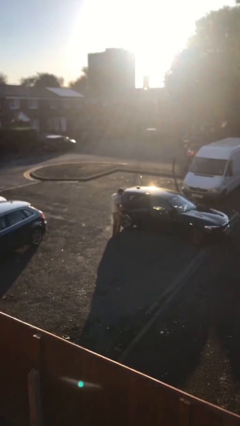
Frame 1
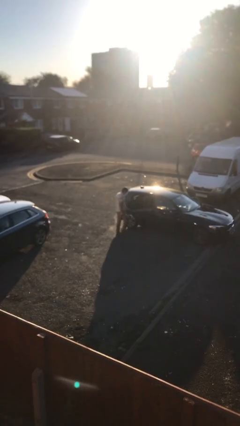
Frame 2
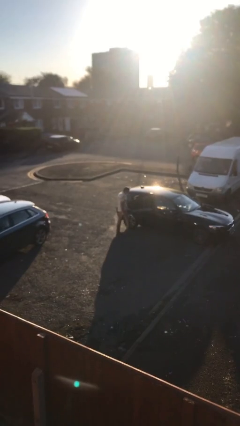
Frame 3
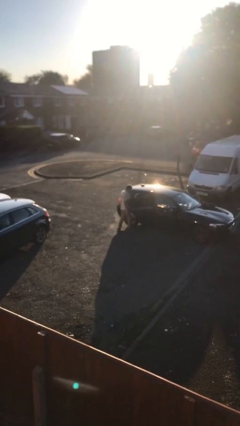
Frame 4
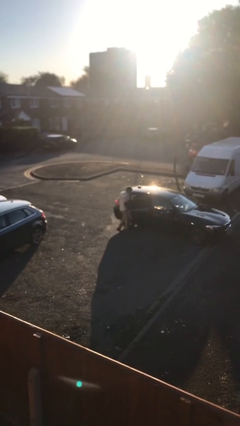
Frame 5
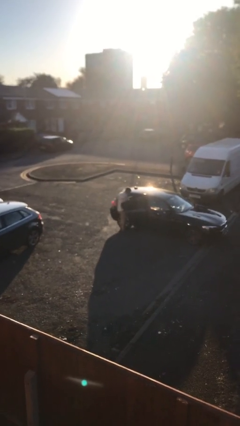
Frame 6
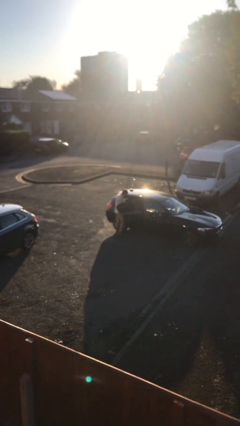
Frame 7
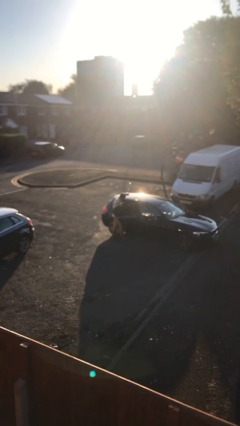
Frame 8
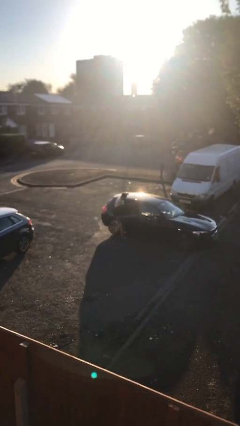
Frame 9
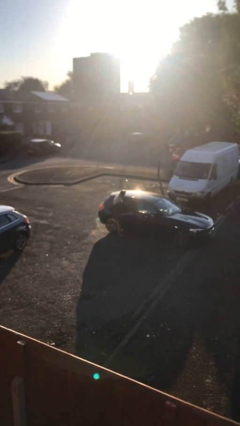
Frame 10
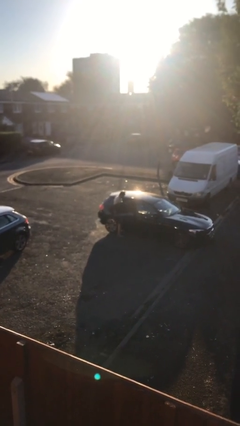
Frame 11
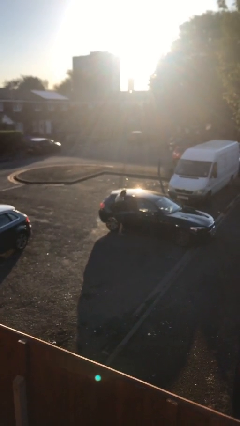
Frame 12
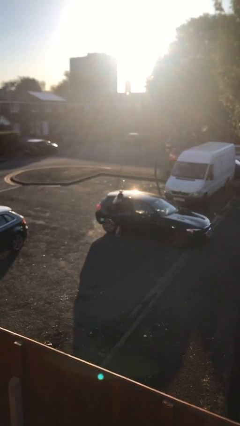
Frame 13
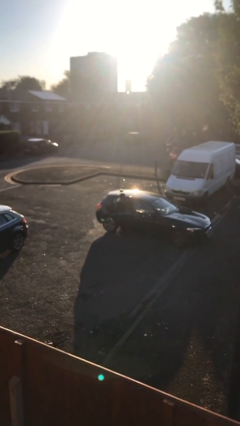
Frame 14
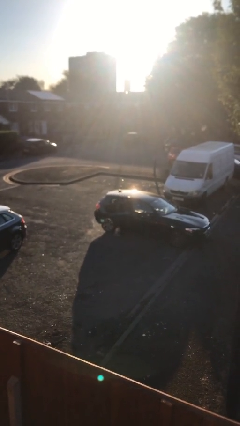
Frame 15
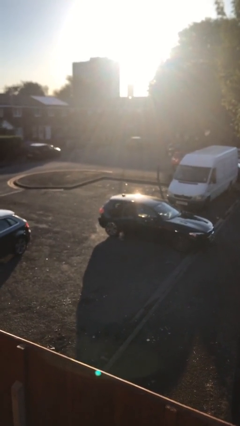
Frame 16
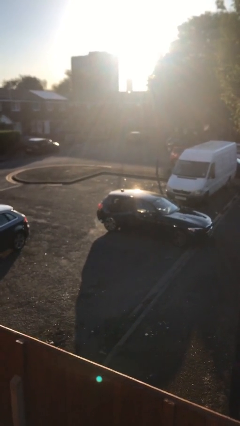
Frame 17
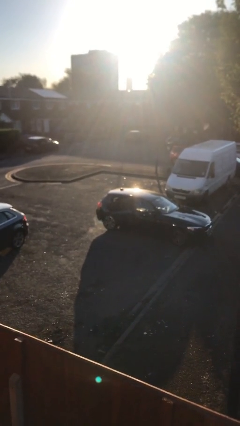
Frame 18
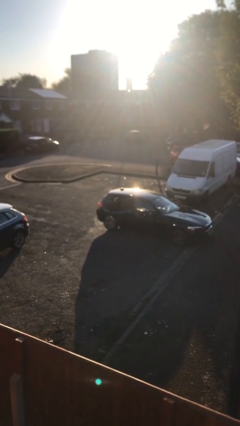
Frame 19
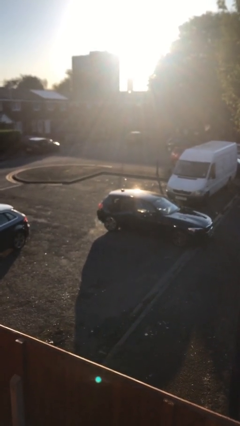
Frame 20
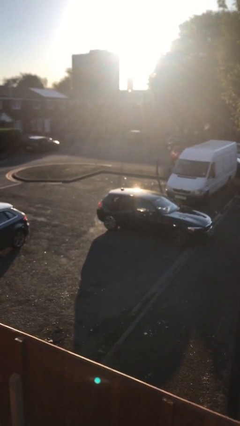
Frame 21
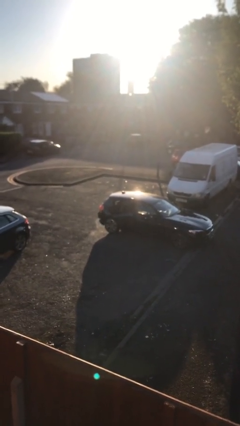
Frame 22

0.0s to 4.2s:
person enters car

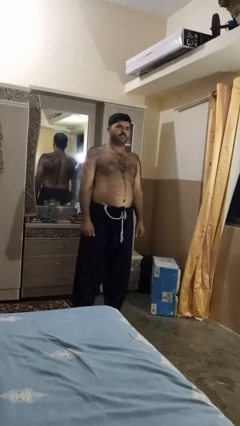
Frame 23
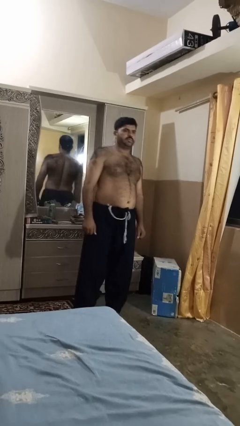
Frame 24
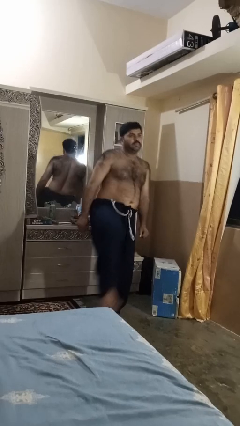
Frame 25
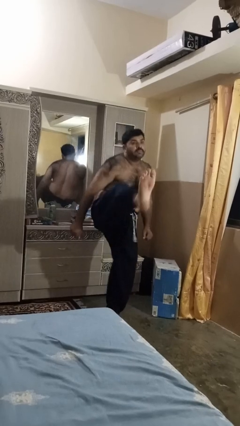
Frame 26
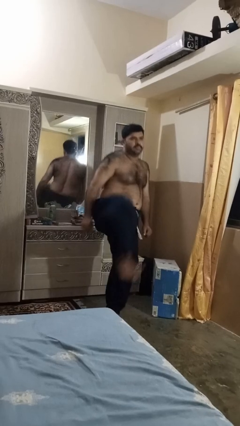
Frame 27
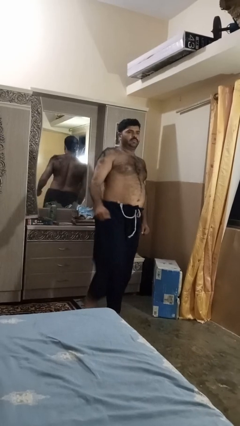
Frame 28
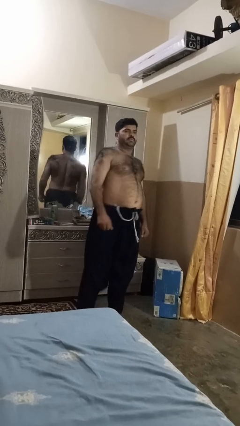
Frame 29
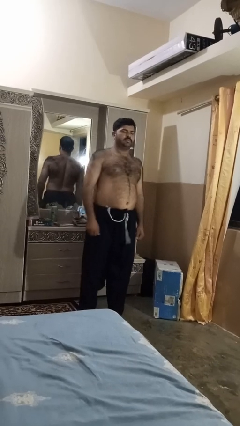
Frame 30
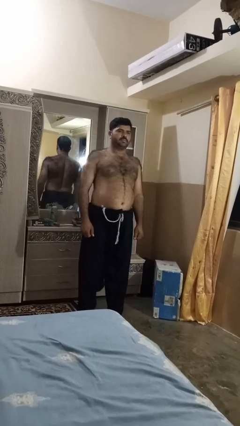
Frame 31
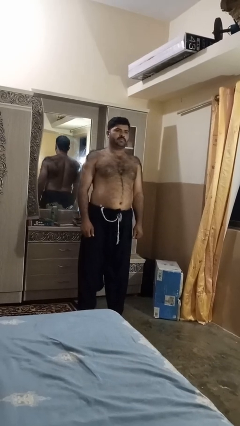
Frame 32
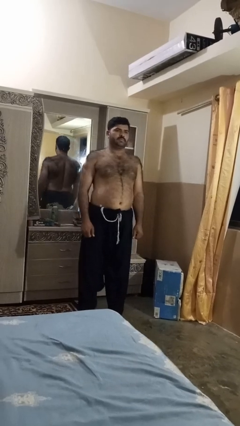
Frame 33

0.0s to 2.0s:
person karate kicks

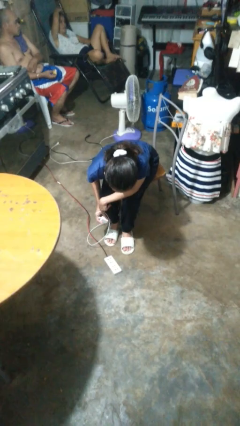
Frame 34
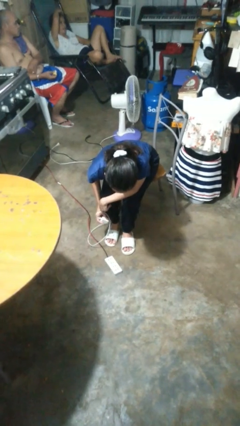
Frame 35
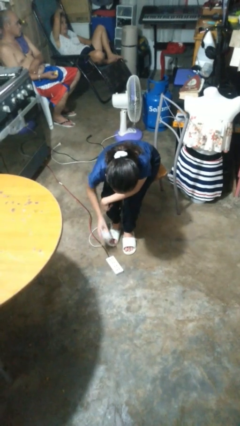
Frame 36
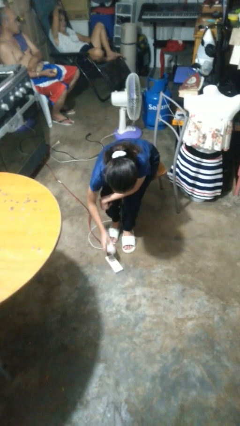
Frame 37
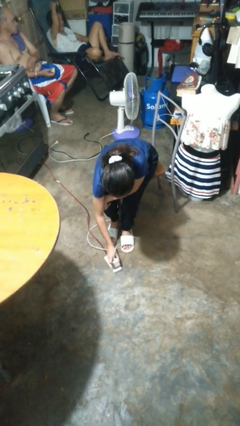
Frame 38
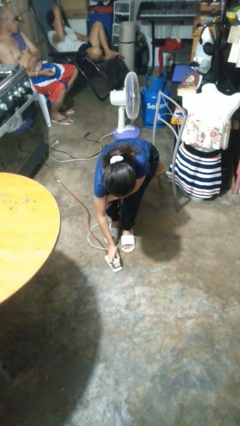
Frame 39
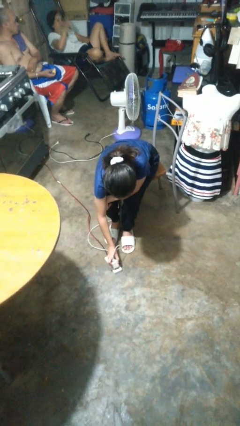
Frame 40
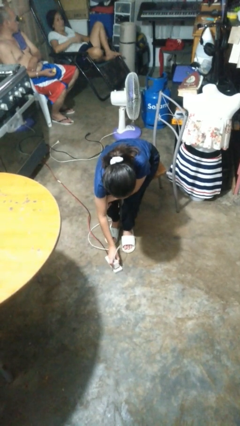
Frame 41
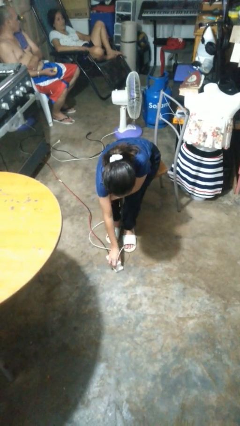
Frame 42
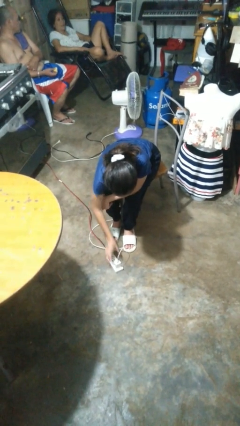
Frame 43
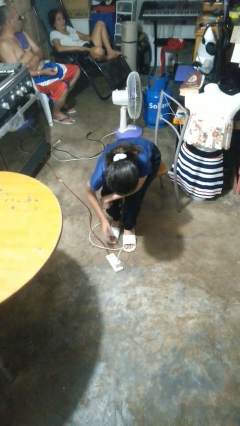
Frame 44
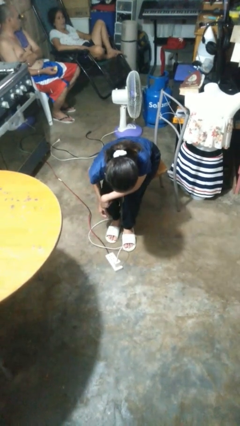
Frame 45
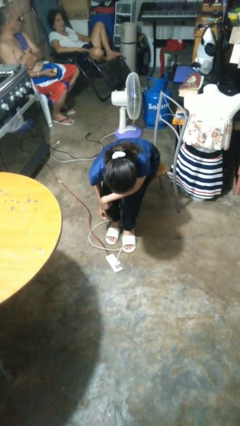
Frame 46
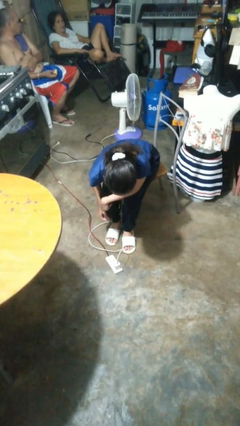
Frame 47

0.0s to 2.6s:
person plugs into electrical socket

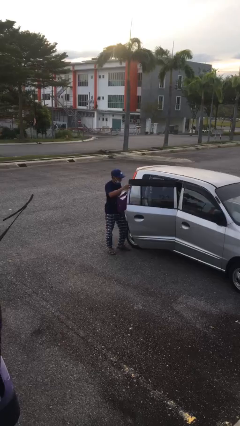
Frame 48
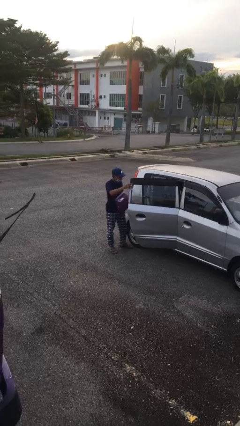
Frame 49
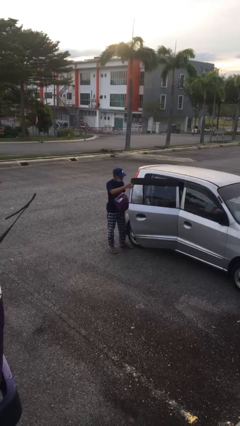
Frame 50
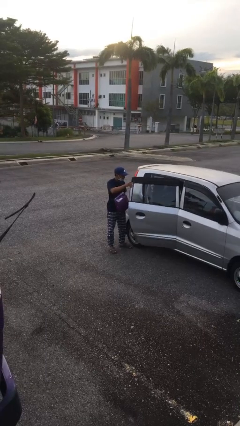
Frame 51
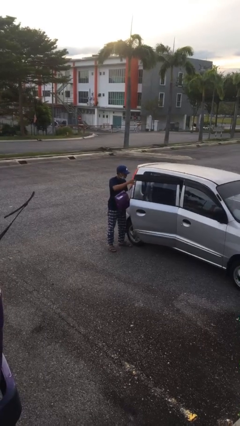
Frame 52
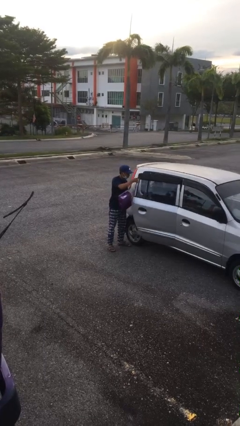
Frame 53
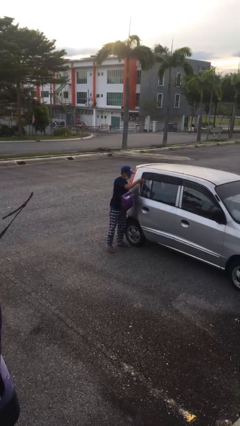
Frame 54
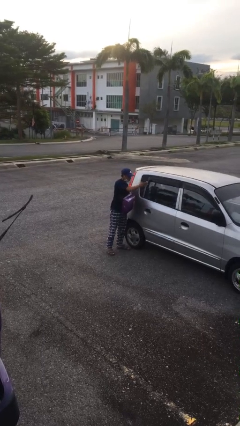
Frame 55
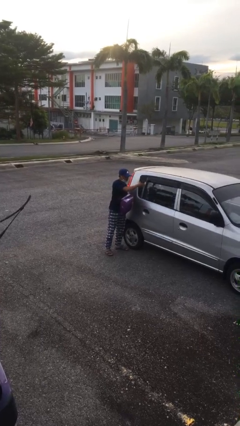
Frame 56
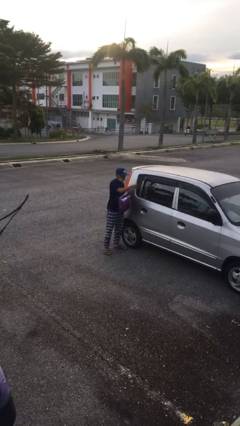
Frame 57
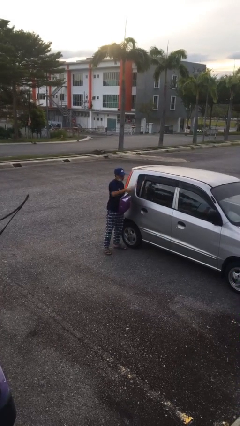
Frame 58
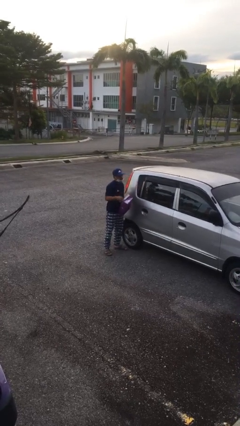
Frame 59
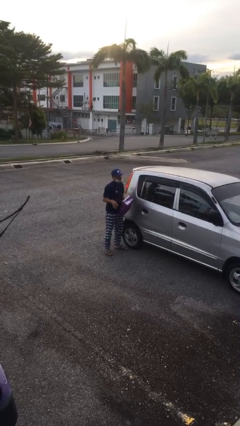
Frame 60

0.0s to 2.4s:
person closes car door

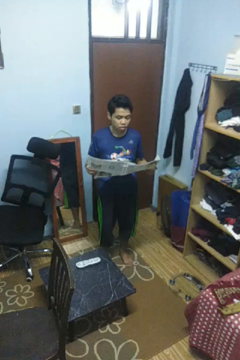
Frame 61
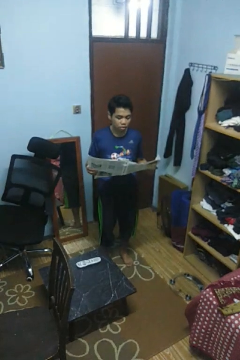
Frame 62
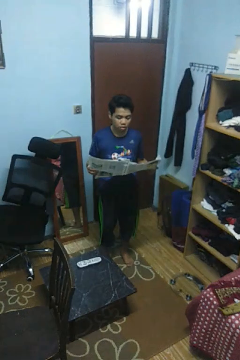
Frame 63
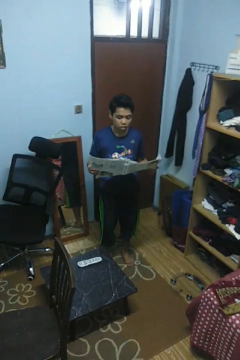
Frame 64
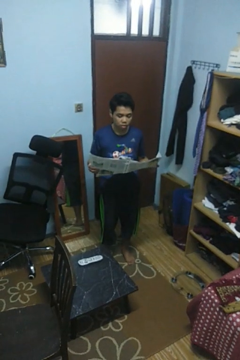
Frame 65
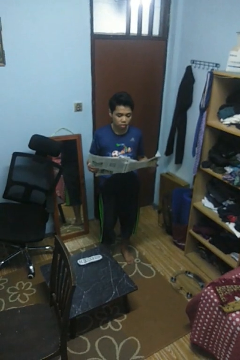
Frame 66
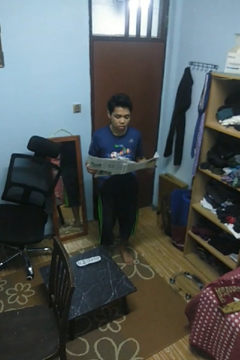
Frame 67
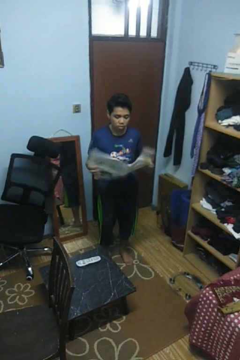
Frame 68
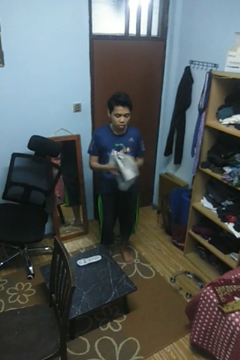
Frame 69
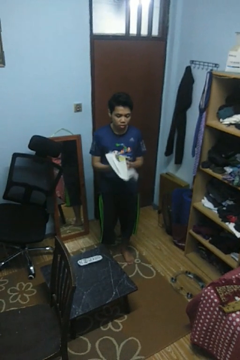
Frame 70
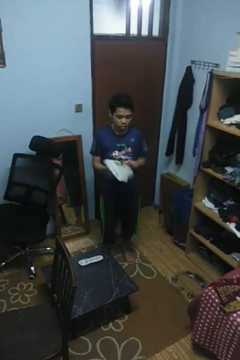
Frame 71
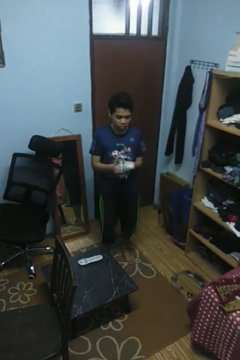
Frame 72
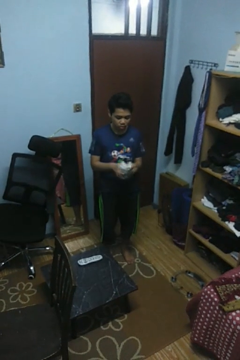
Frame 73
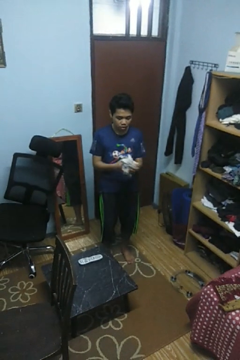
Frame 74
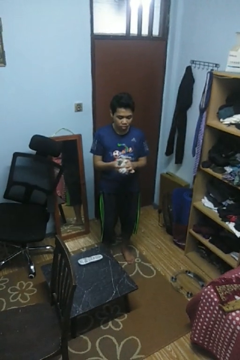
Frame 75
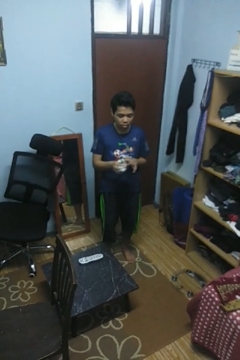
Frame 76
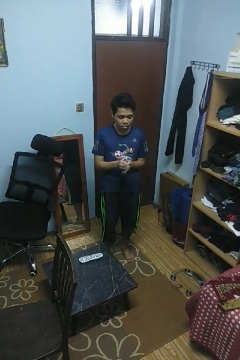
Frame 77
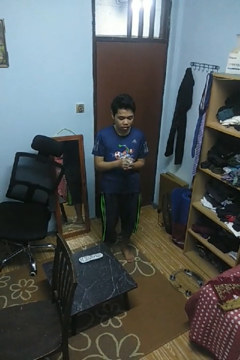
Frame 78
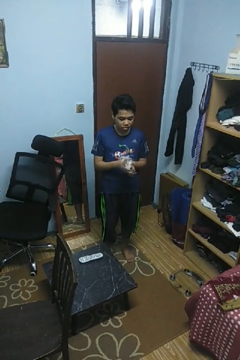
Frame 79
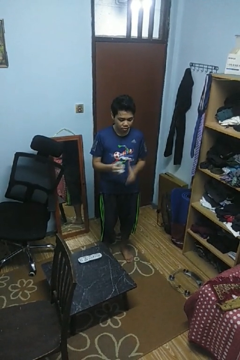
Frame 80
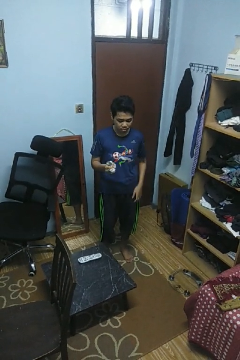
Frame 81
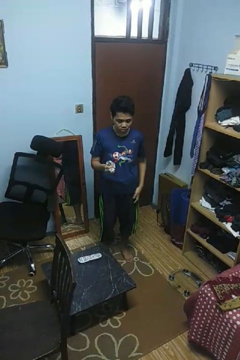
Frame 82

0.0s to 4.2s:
person crumples paper

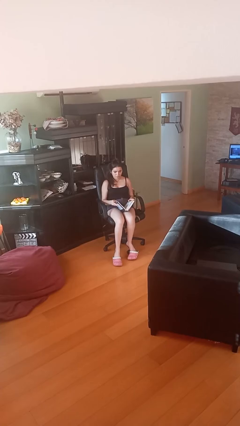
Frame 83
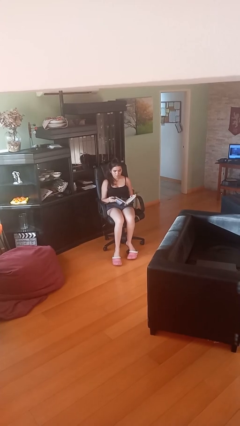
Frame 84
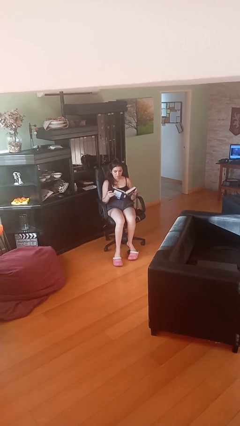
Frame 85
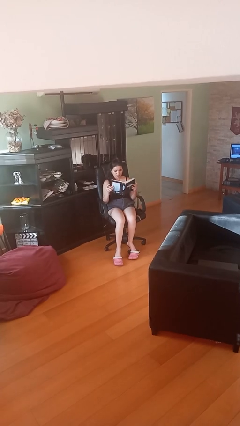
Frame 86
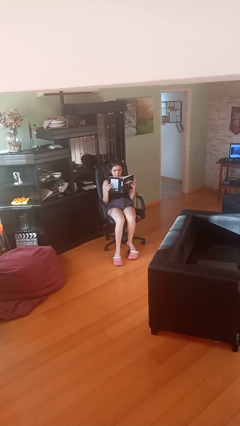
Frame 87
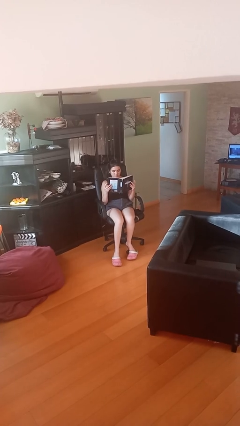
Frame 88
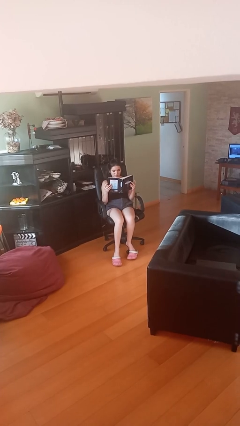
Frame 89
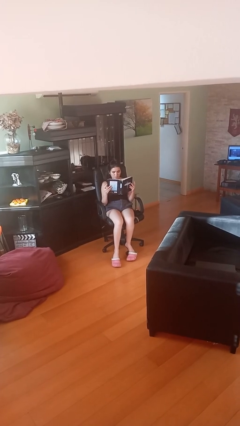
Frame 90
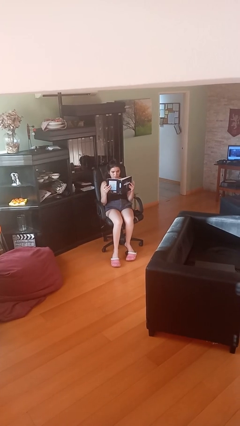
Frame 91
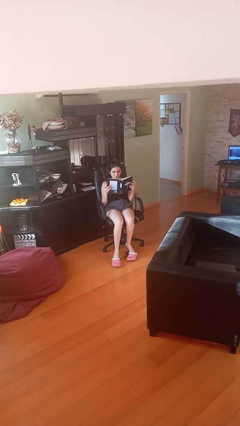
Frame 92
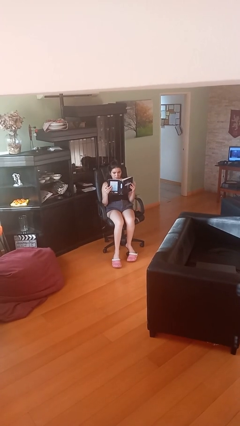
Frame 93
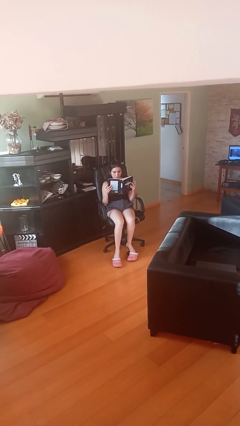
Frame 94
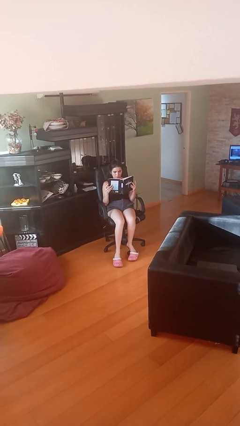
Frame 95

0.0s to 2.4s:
person reads document

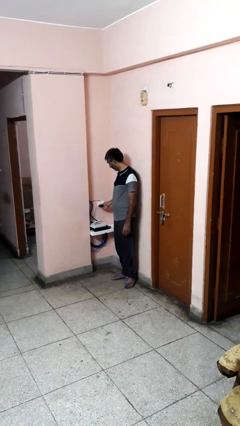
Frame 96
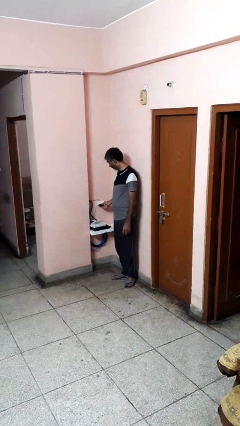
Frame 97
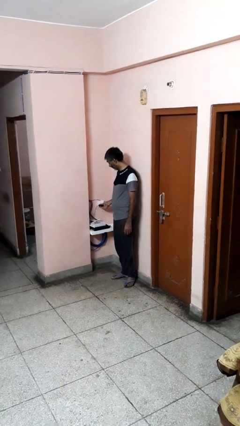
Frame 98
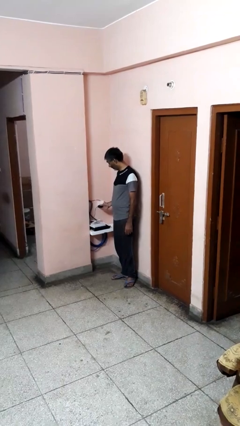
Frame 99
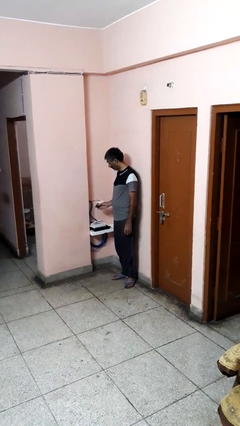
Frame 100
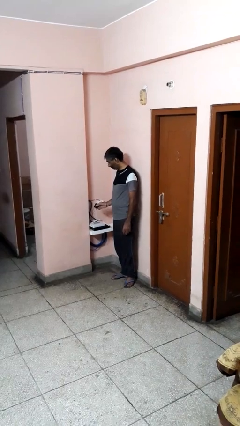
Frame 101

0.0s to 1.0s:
person unplugs from electrical socket
